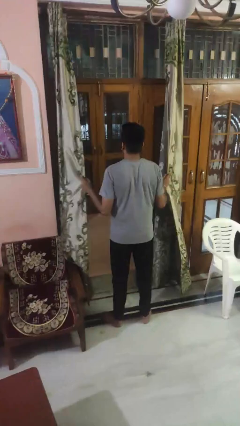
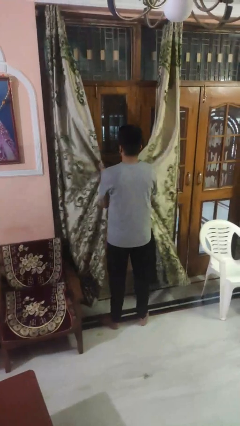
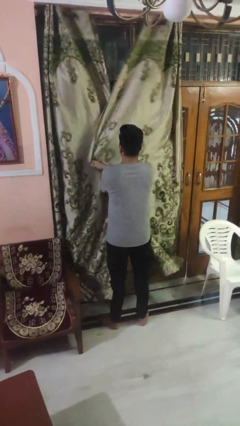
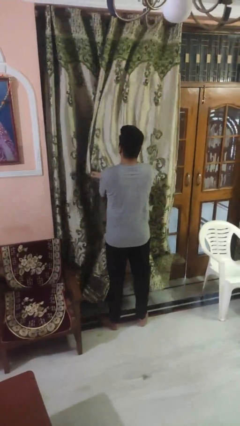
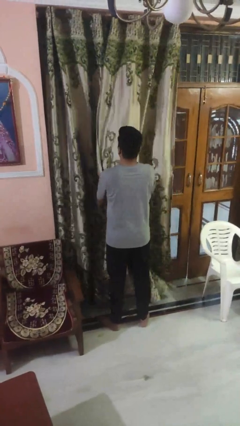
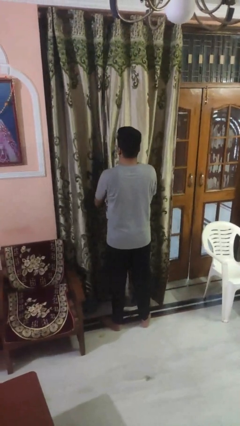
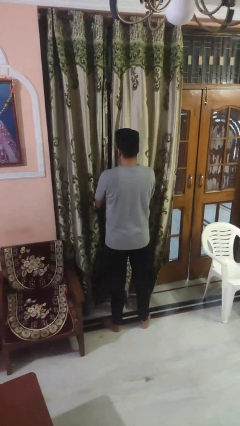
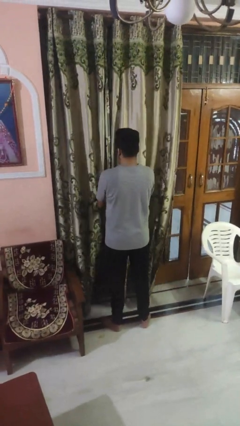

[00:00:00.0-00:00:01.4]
person closes curtains

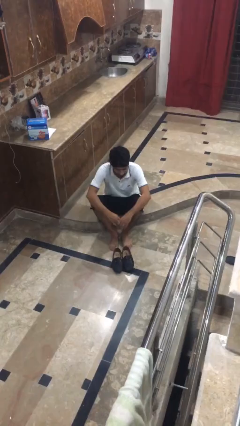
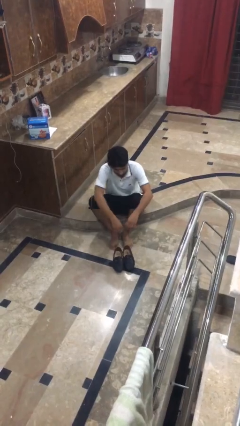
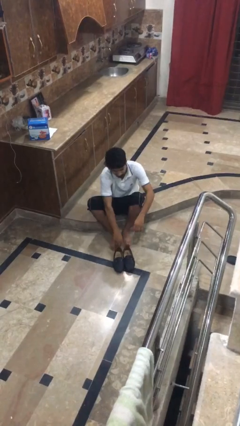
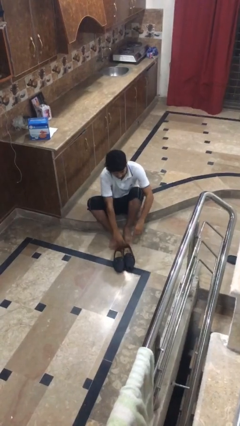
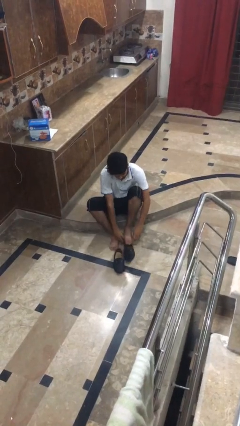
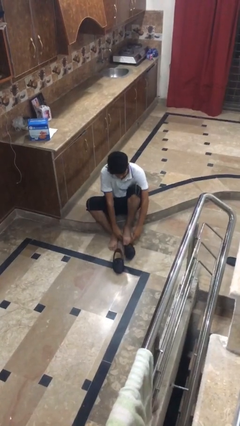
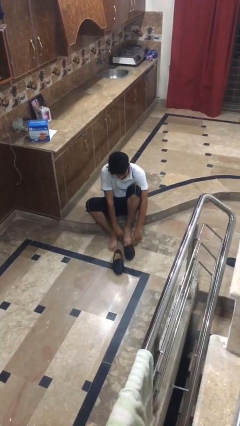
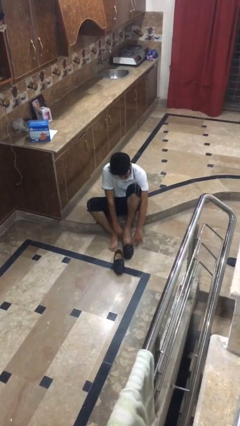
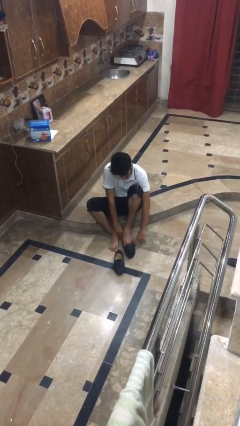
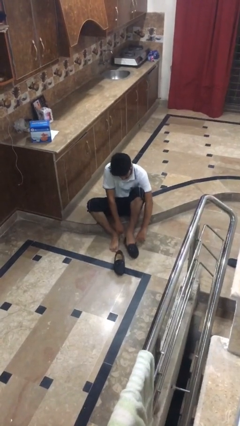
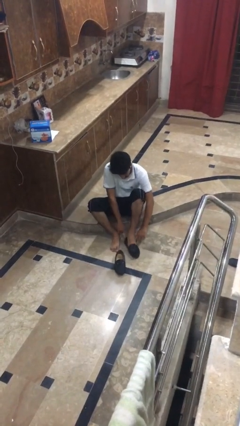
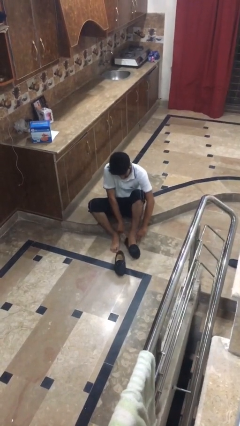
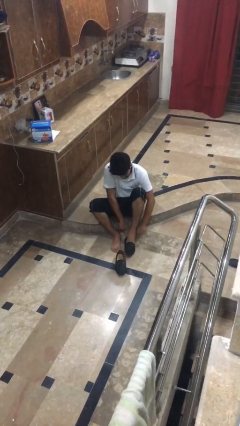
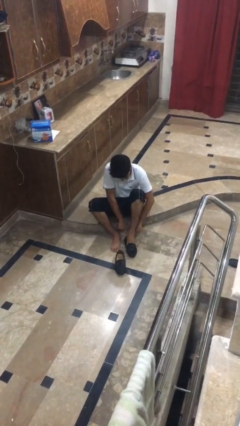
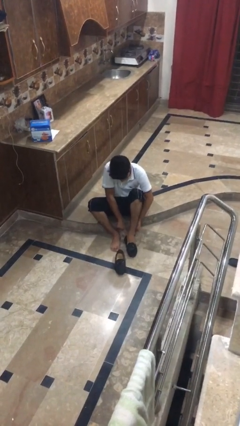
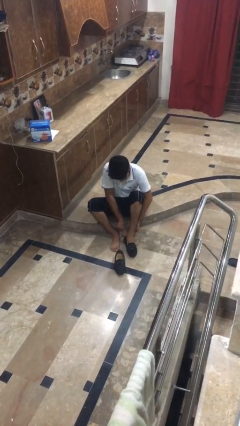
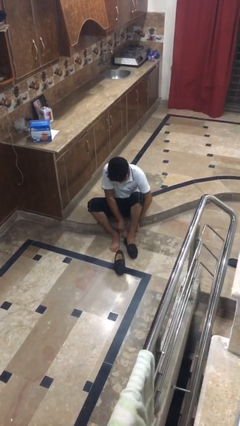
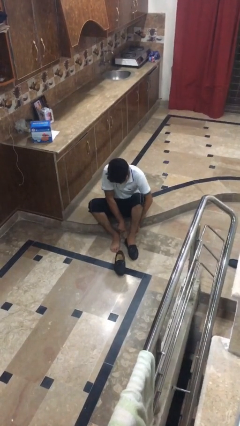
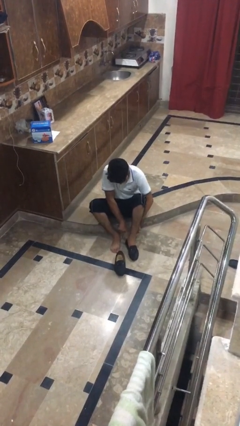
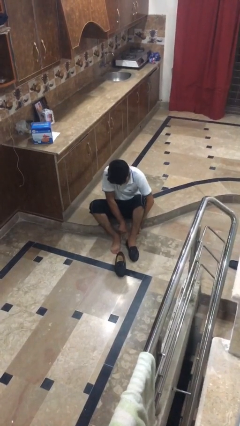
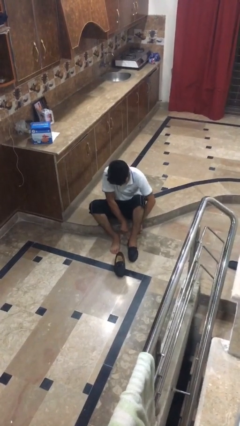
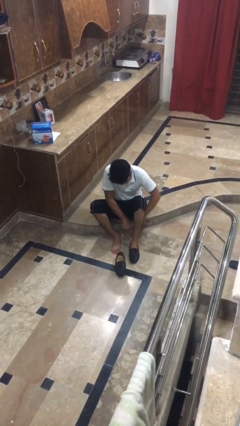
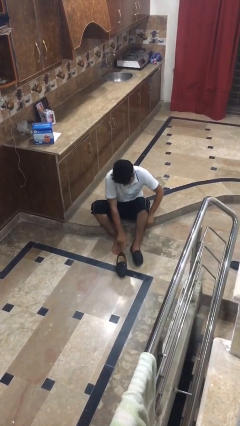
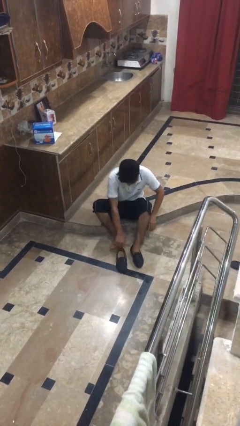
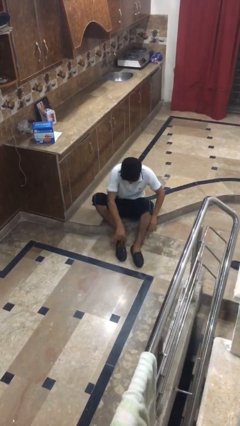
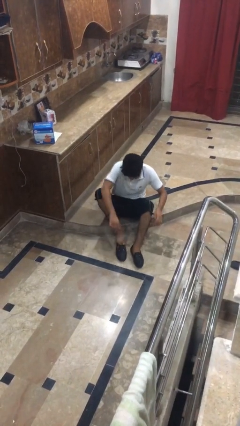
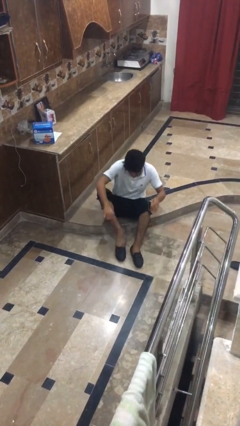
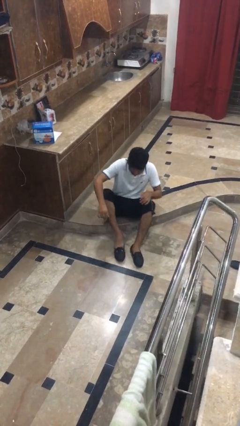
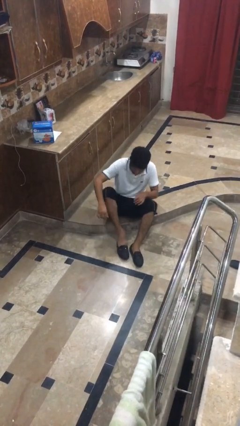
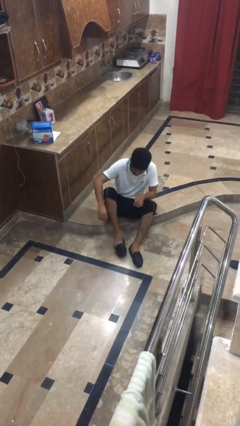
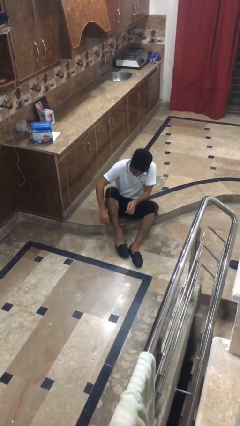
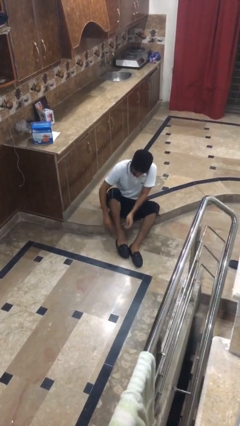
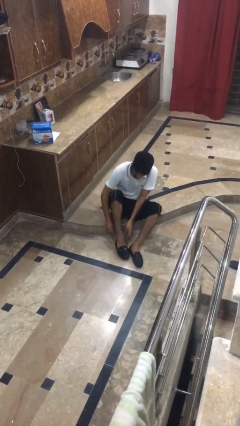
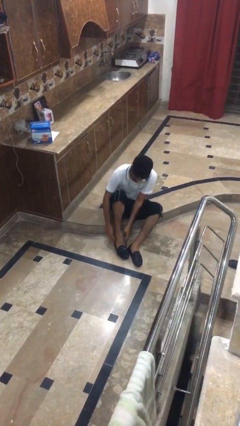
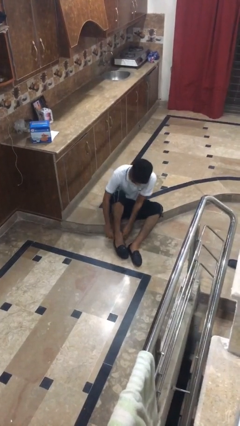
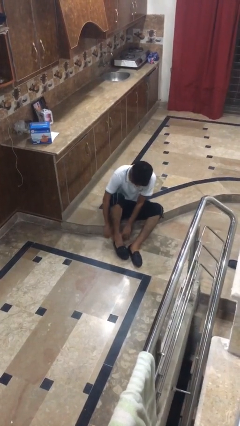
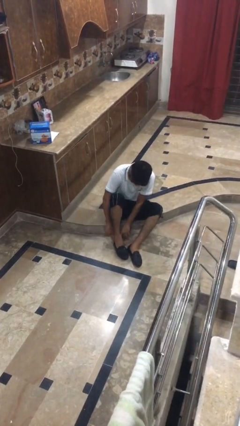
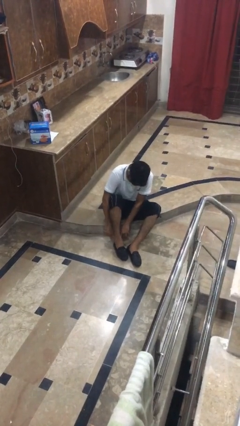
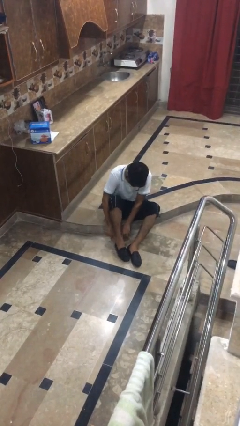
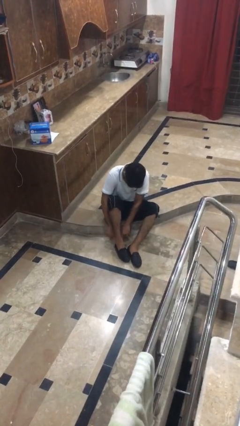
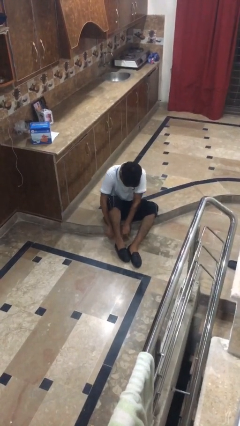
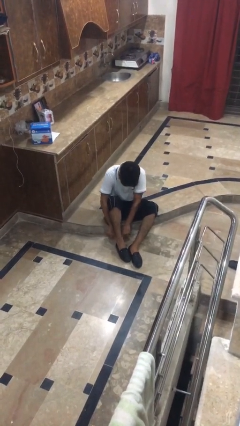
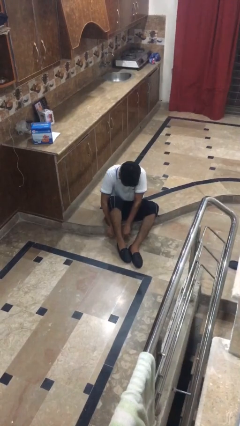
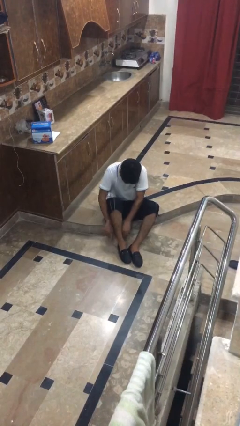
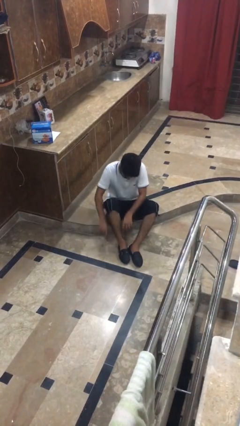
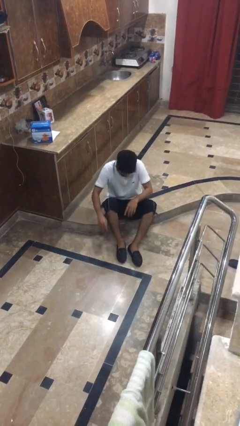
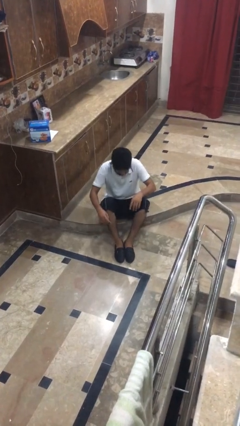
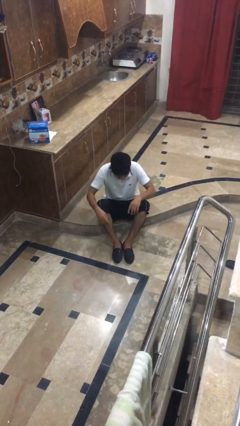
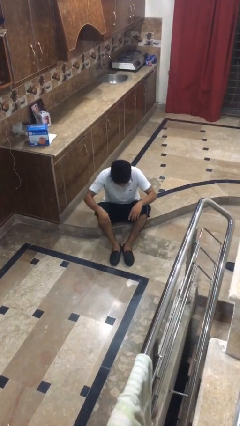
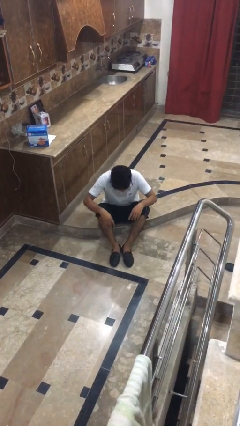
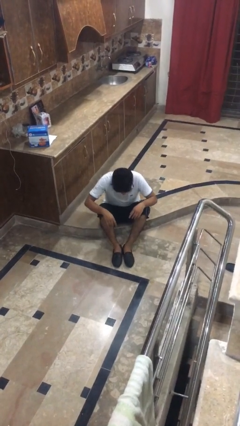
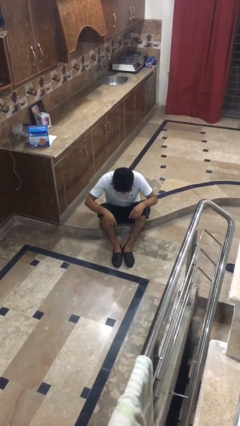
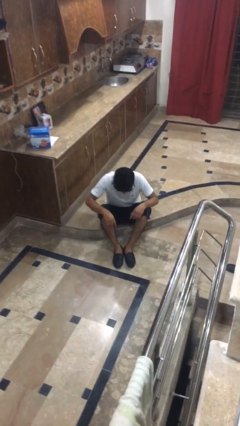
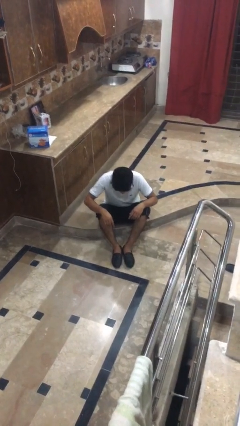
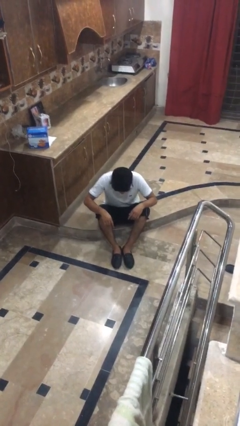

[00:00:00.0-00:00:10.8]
person puts on boots

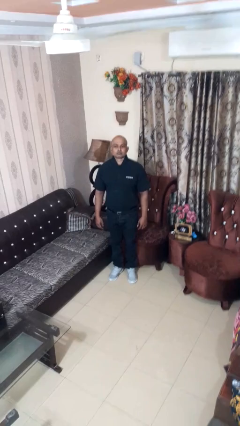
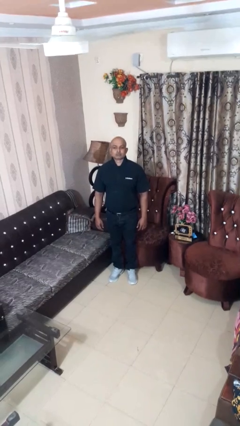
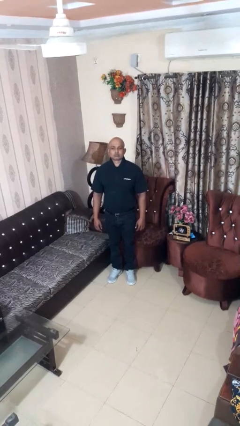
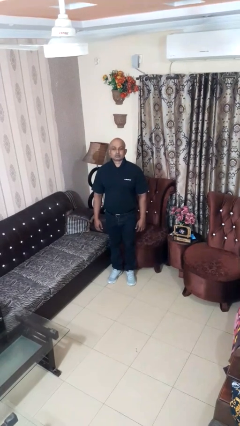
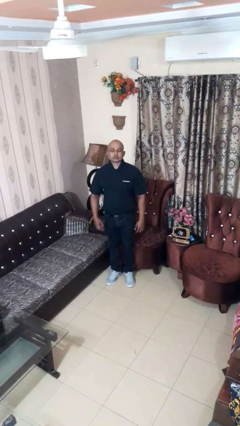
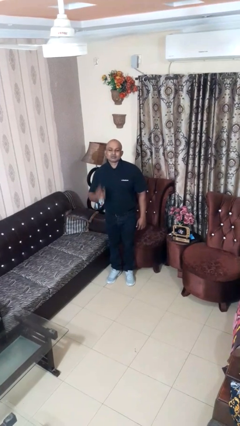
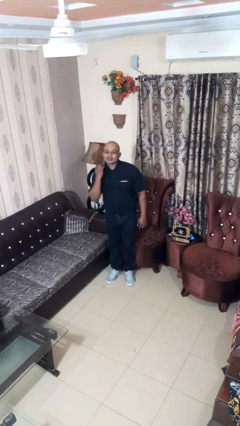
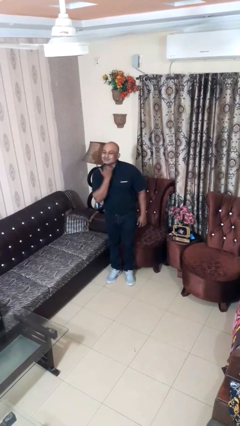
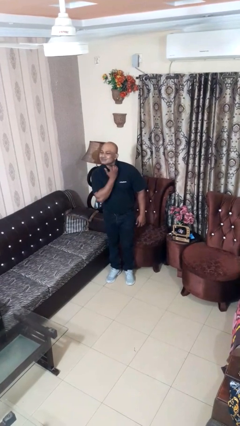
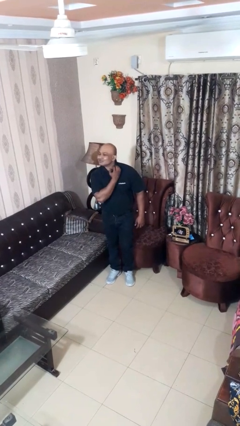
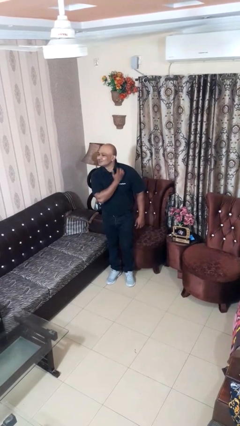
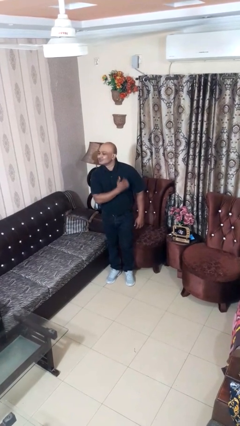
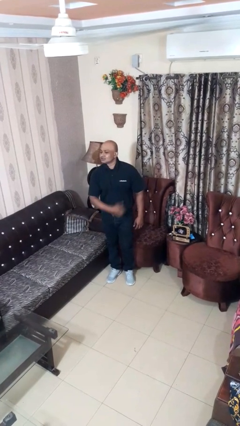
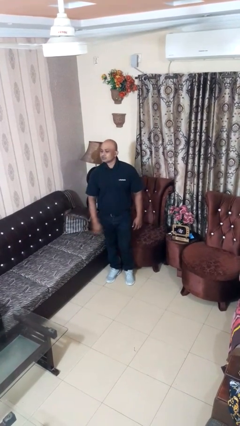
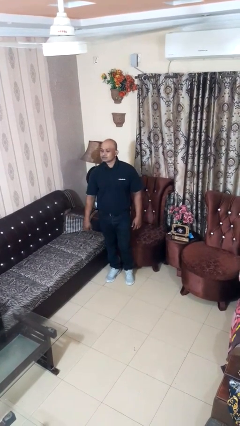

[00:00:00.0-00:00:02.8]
person gestures cut

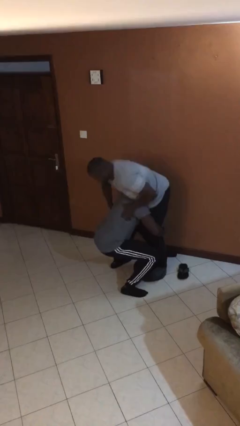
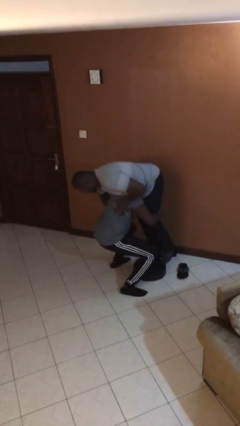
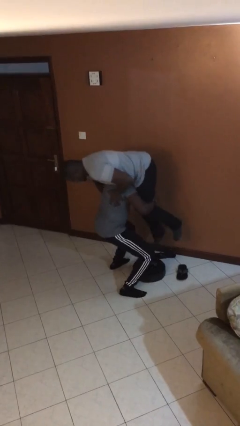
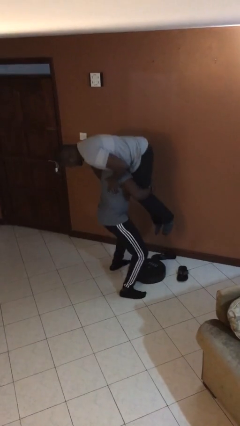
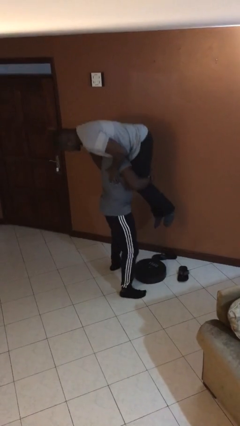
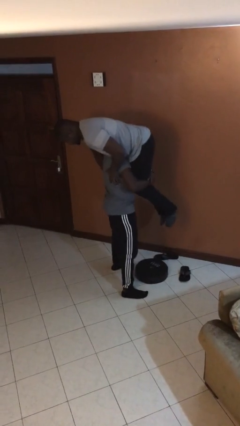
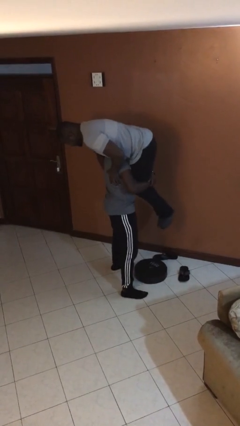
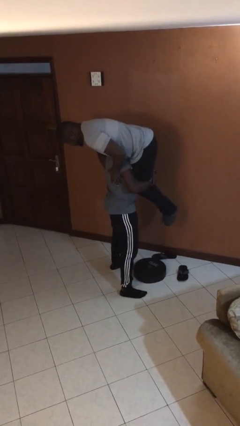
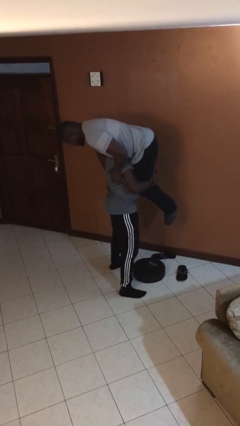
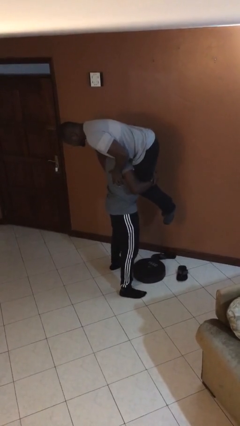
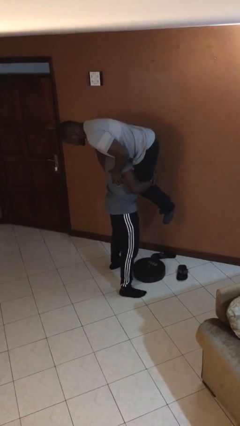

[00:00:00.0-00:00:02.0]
person carries person over shoulder

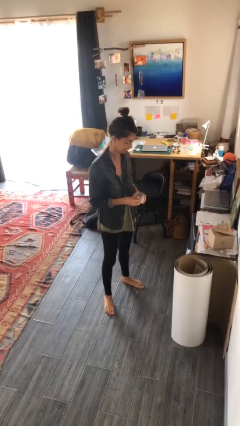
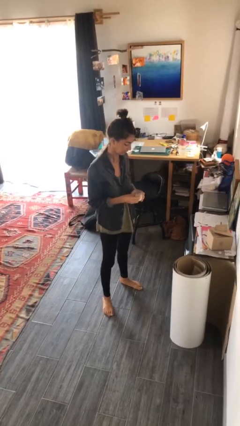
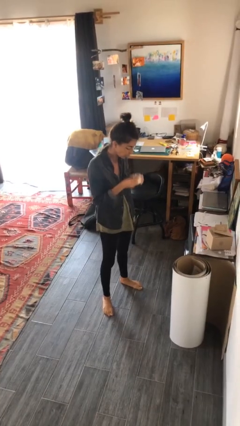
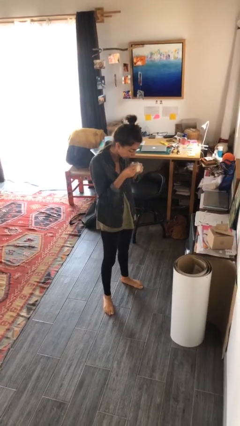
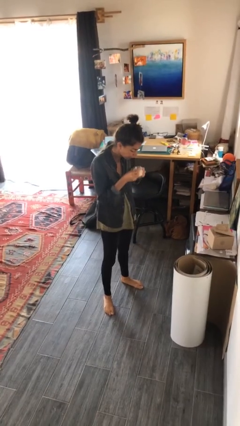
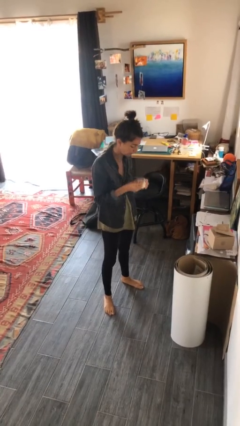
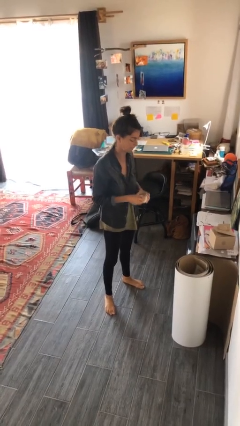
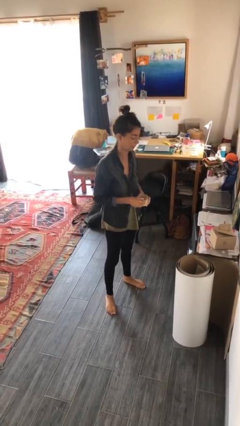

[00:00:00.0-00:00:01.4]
person extinguishes candle
